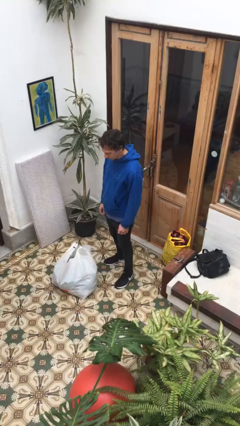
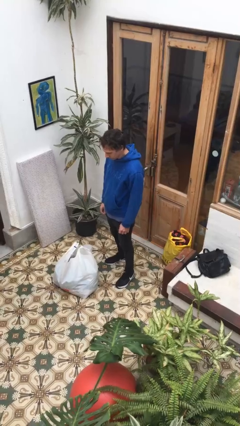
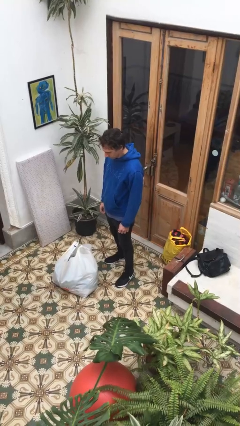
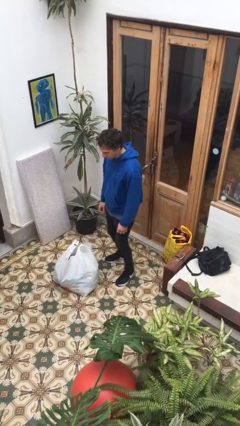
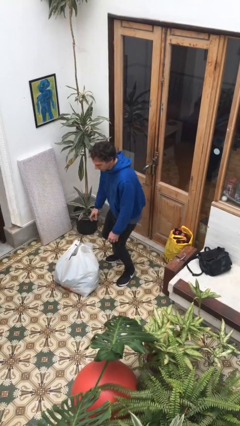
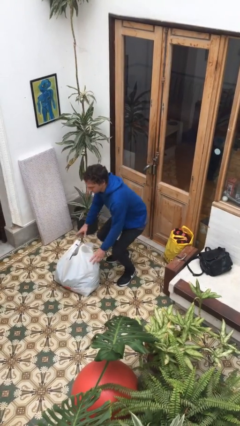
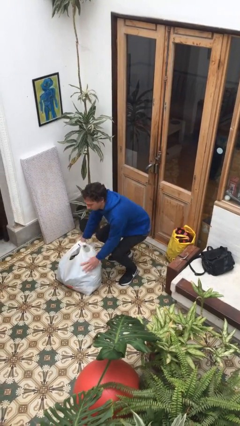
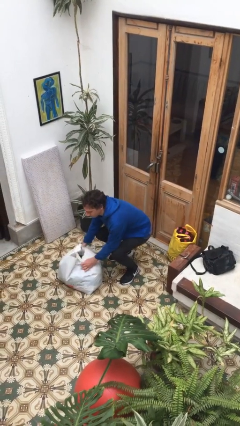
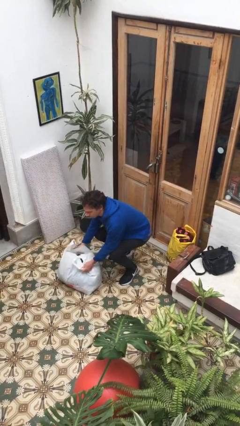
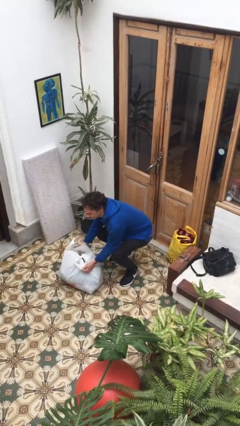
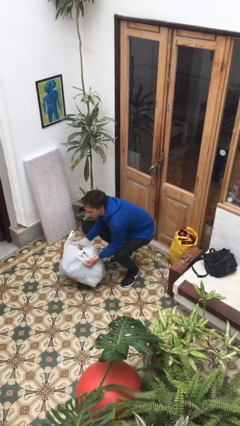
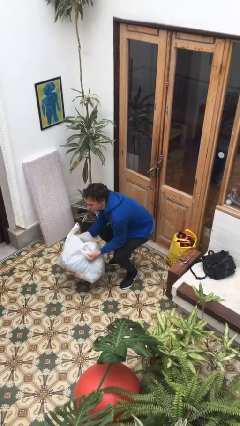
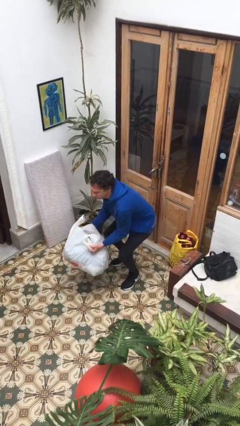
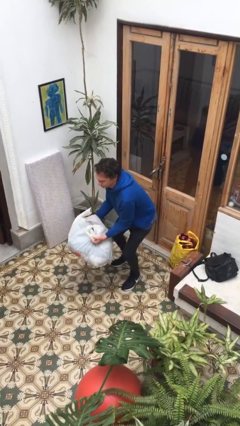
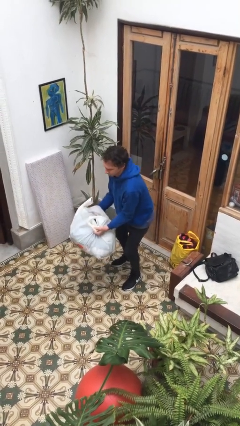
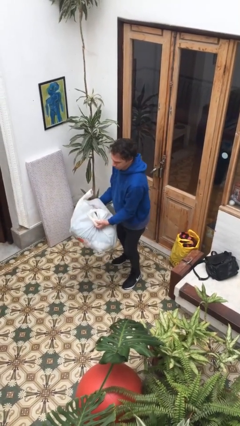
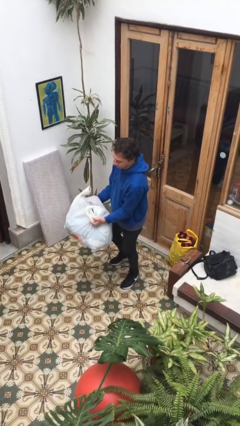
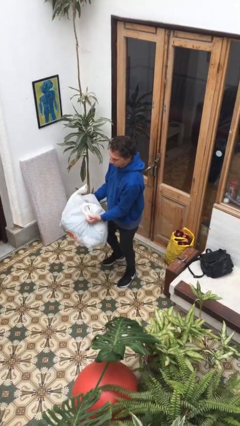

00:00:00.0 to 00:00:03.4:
person picks up object from floor

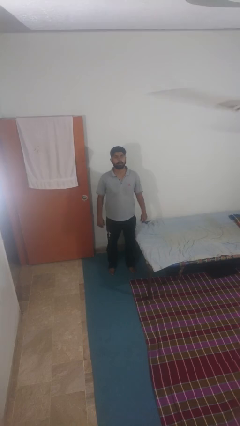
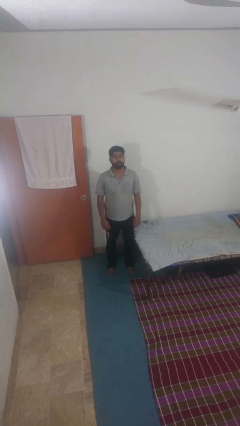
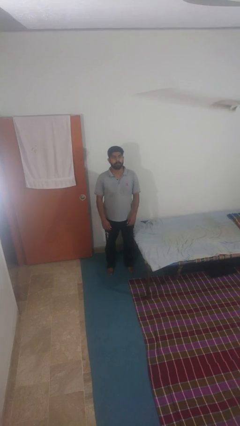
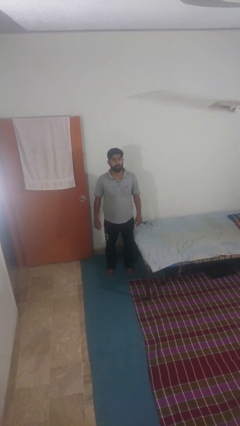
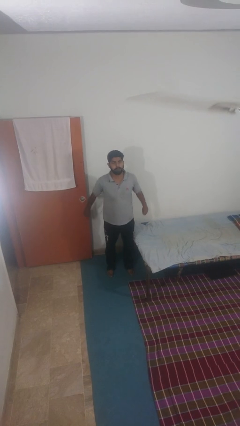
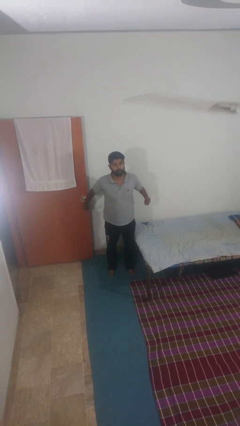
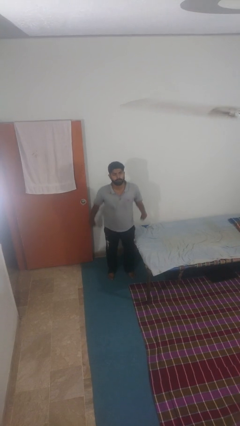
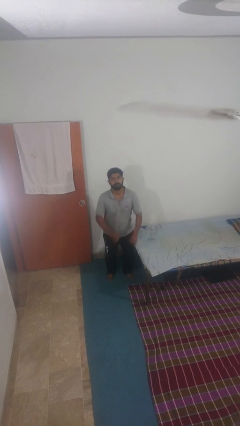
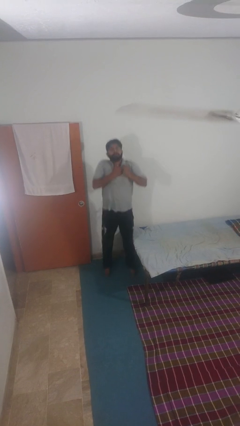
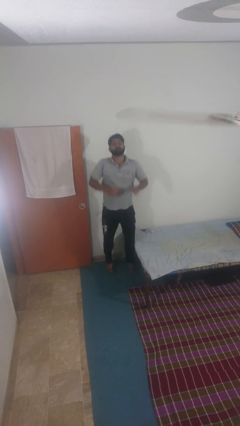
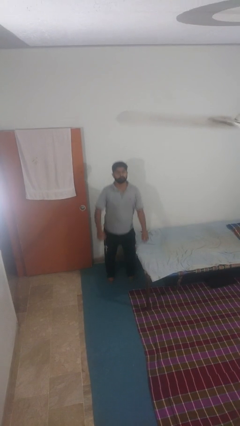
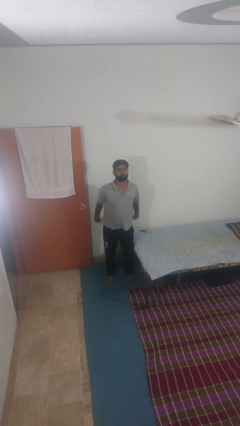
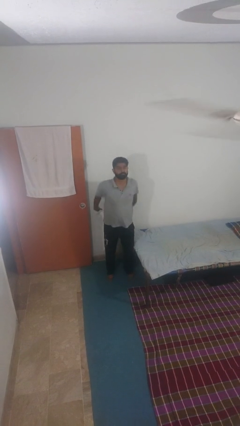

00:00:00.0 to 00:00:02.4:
person jumps

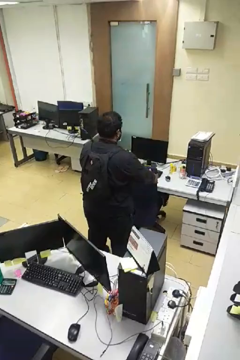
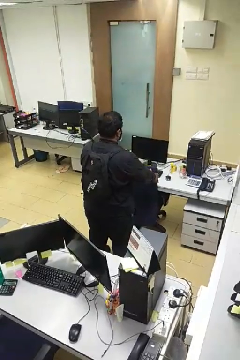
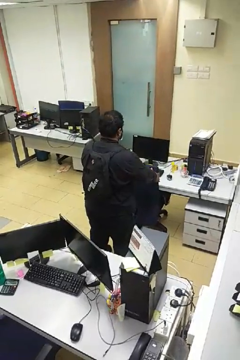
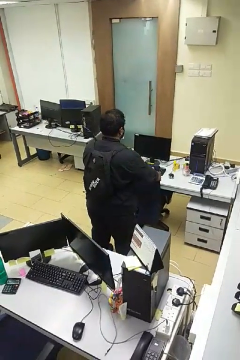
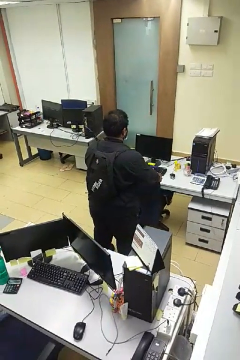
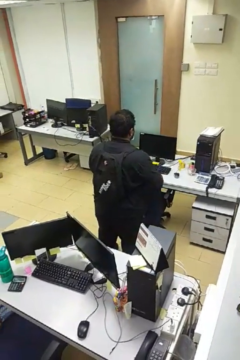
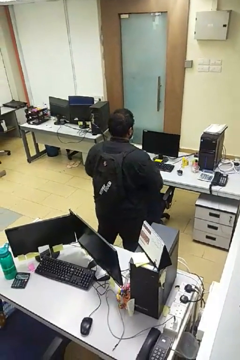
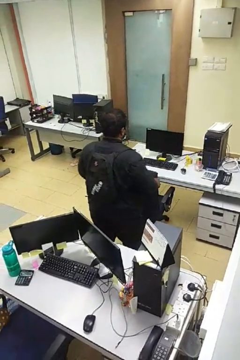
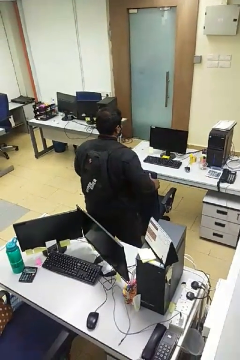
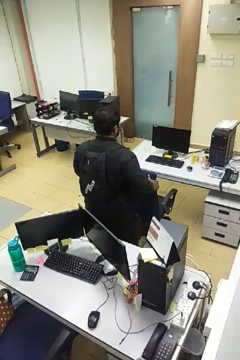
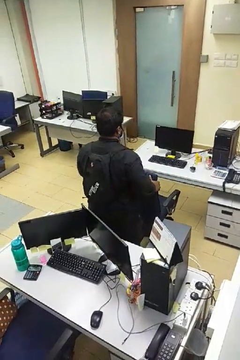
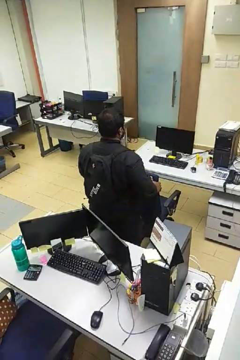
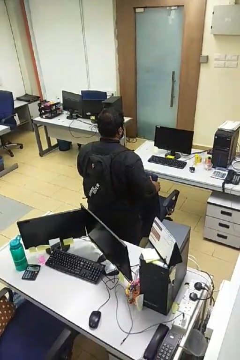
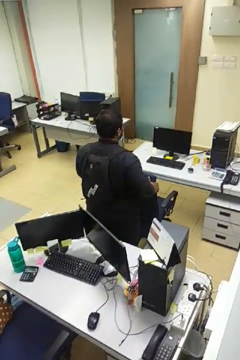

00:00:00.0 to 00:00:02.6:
person pulls out chair

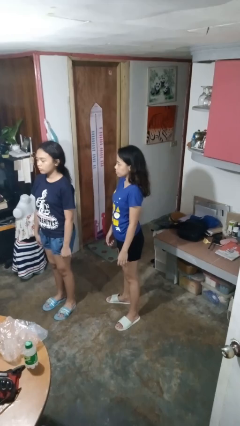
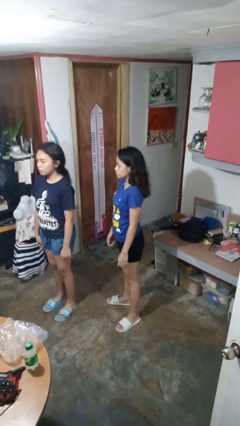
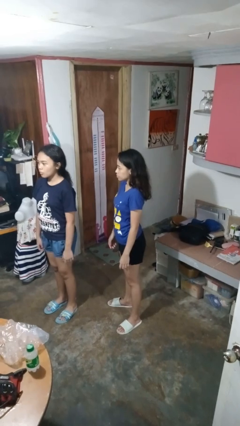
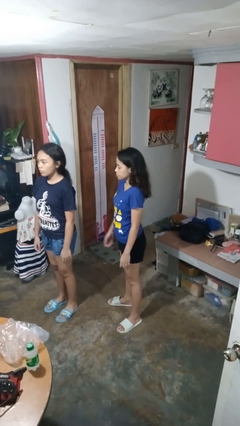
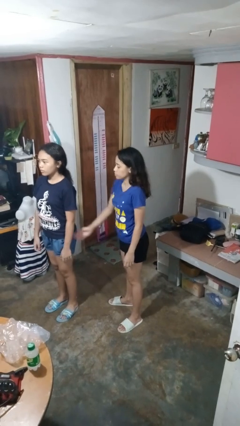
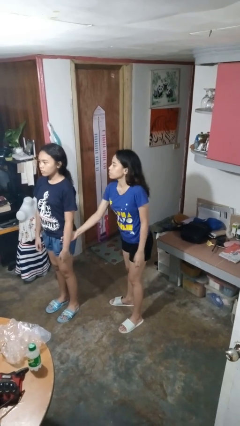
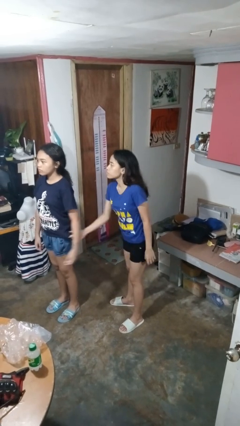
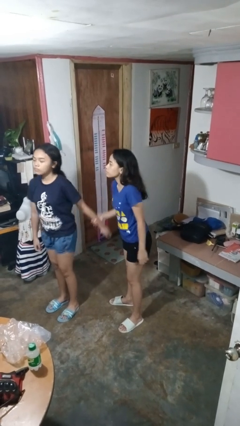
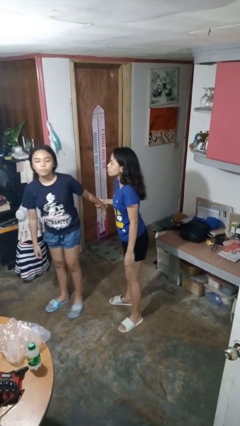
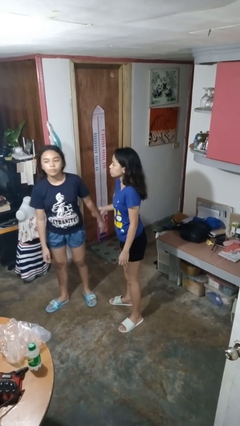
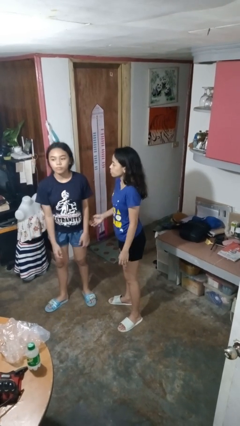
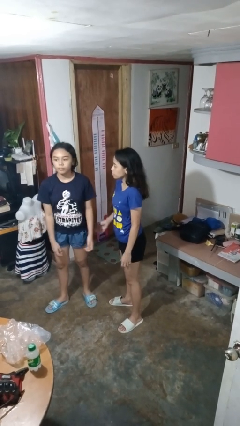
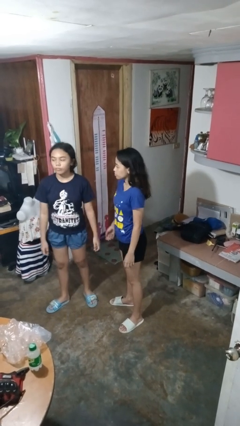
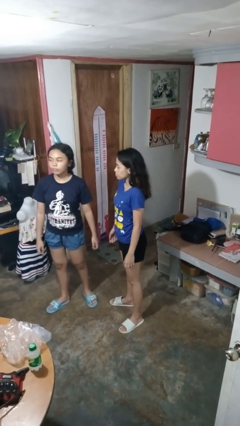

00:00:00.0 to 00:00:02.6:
person grabs person by forearm

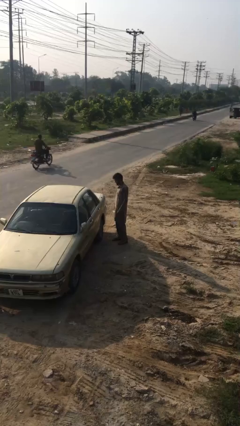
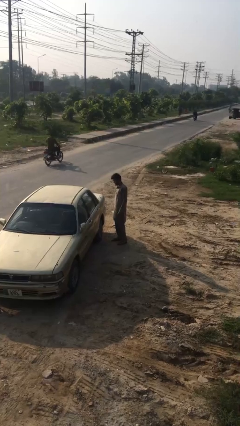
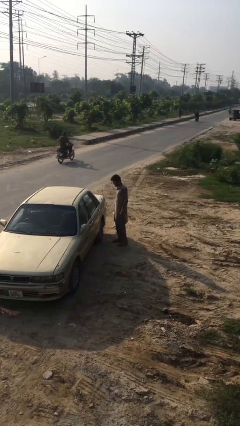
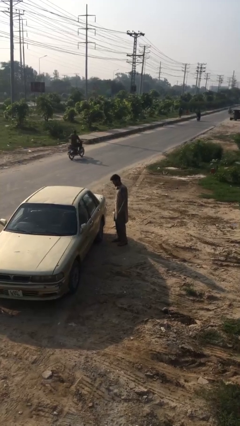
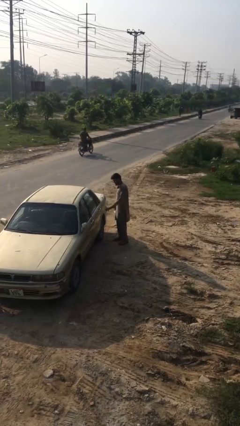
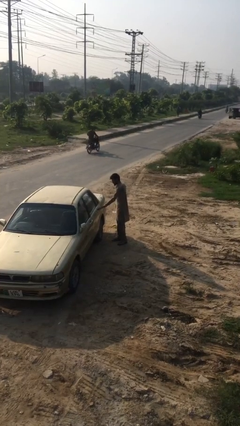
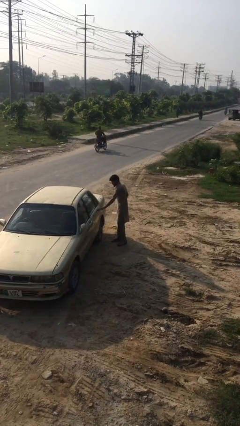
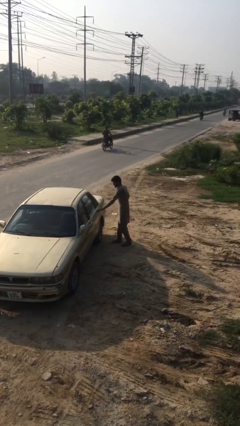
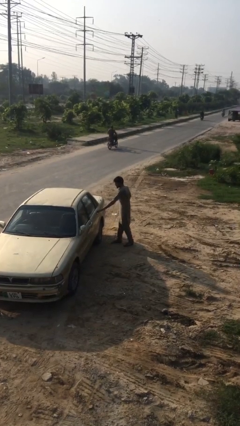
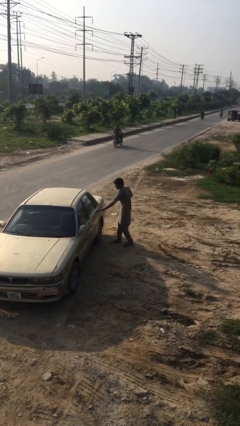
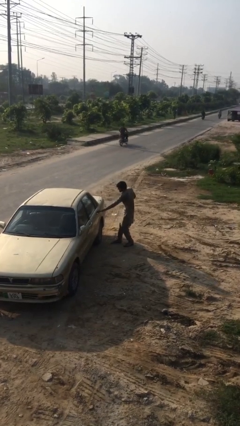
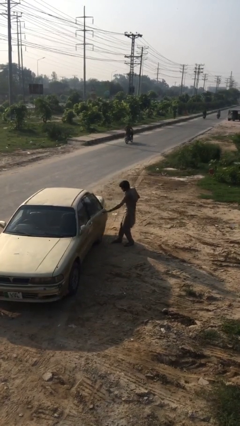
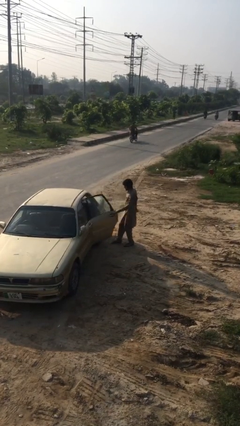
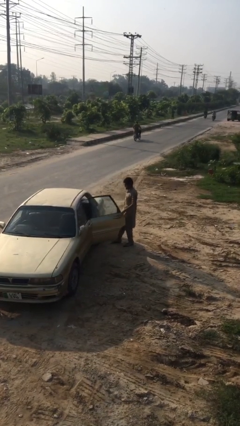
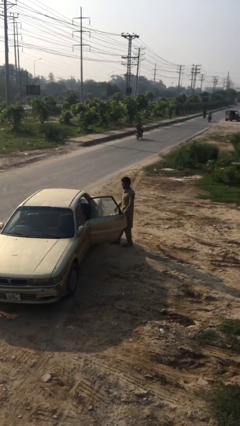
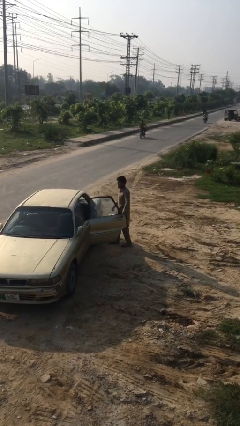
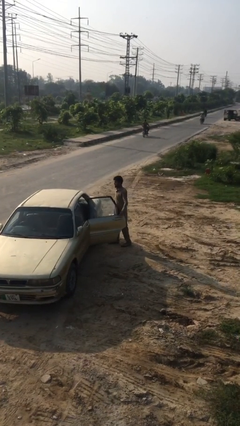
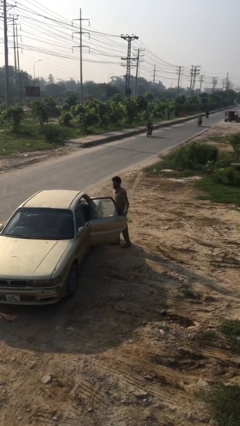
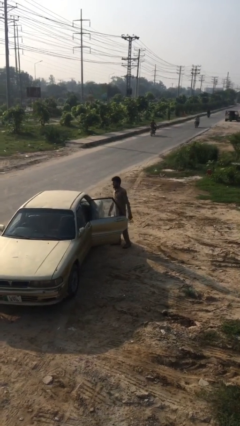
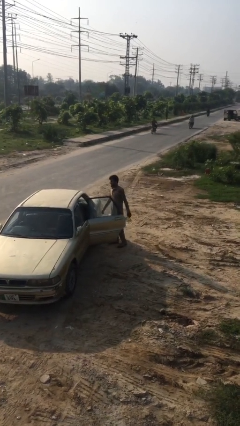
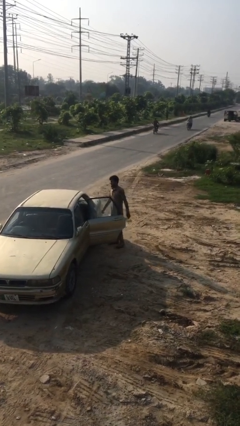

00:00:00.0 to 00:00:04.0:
person opens car door

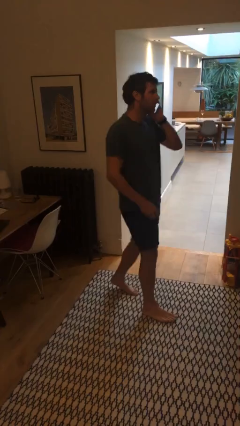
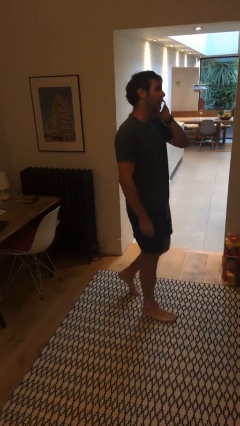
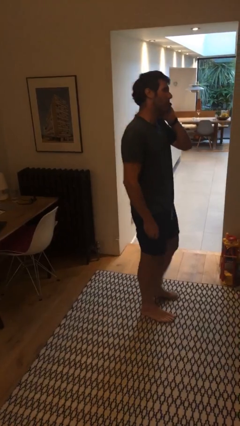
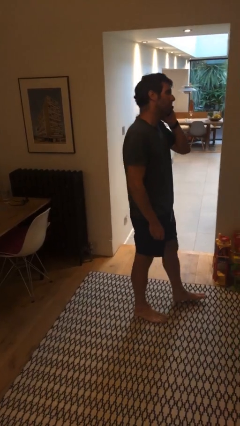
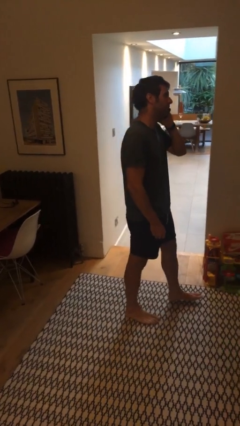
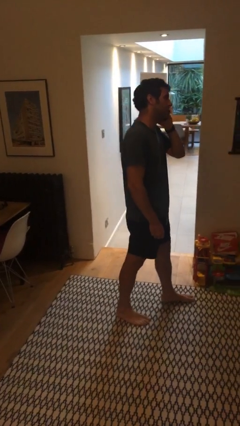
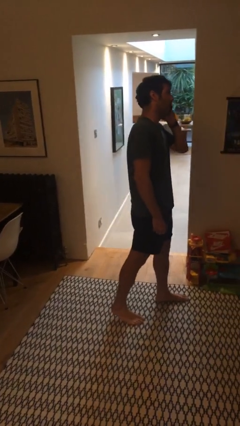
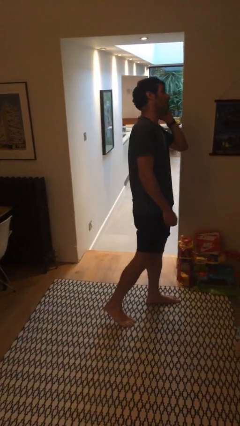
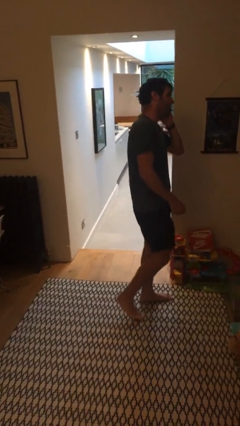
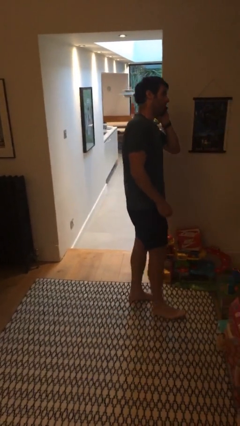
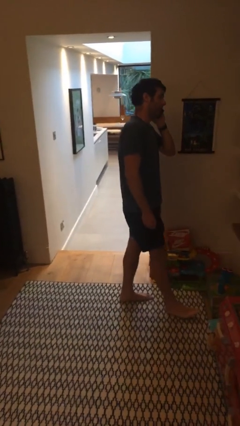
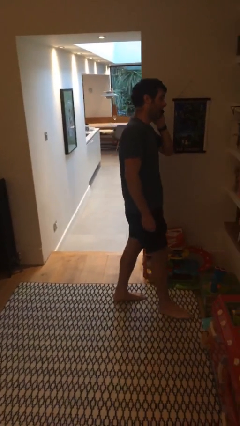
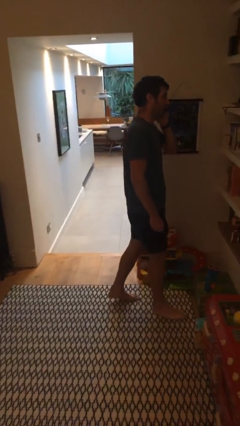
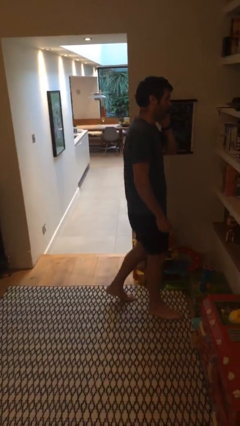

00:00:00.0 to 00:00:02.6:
person talks on phone

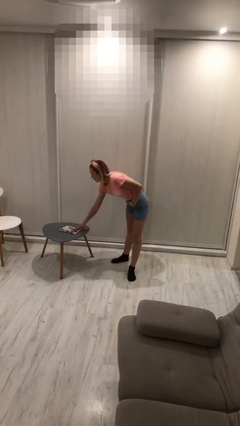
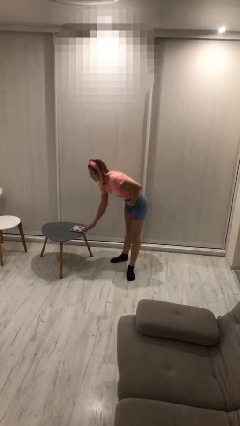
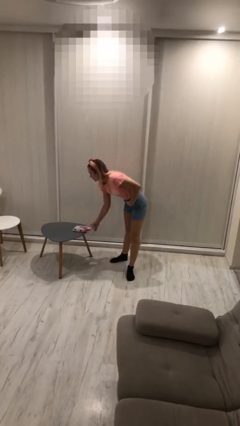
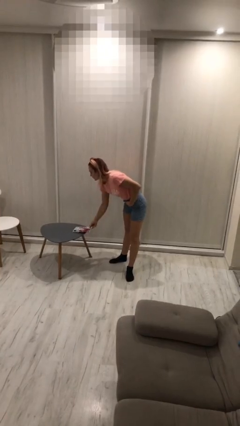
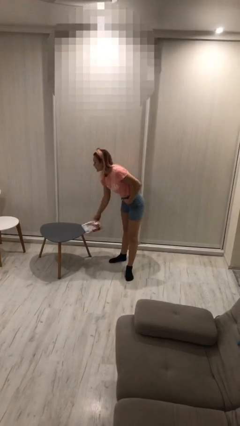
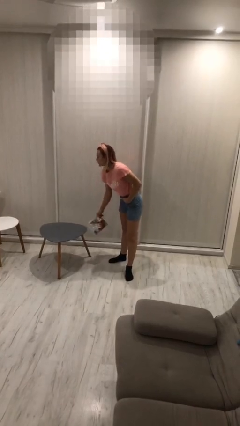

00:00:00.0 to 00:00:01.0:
person picks up object from table
